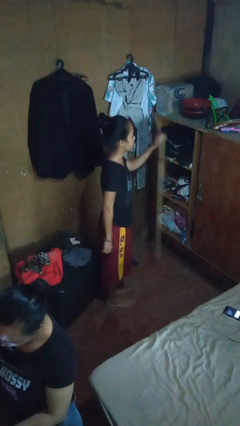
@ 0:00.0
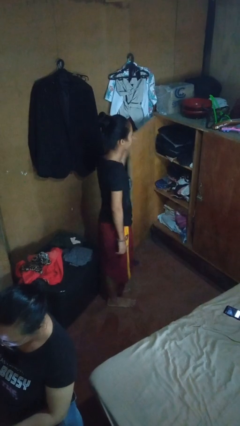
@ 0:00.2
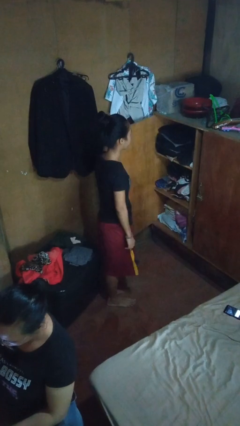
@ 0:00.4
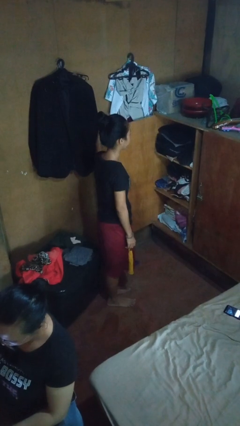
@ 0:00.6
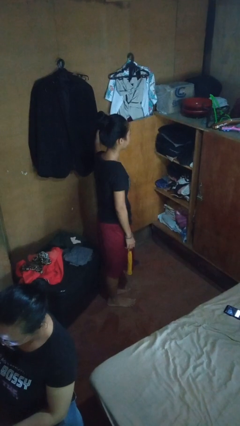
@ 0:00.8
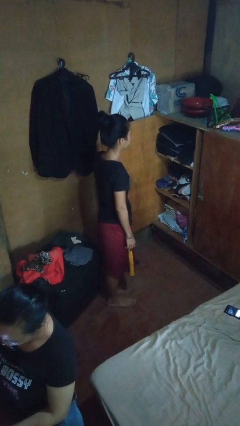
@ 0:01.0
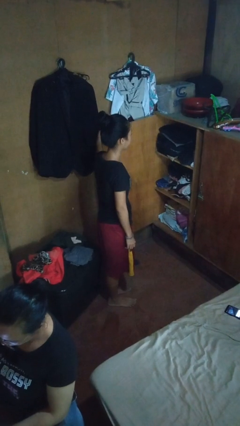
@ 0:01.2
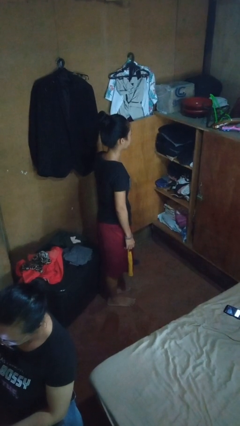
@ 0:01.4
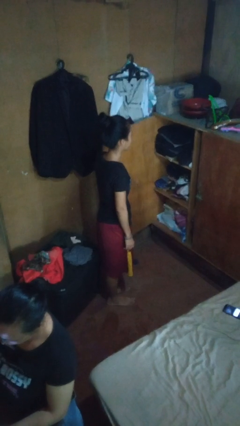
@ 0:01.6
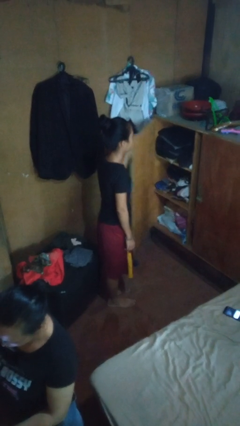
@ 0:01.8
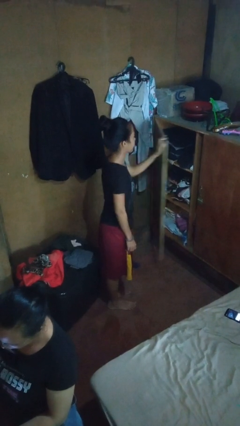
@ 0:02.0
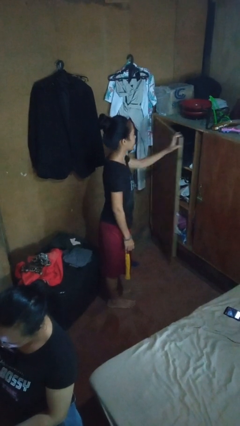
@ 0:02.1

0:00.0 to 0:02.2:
person opens closet door

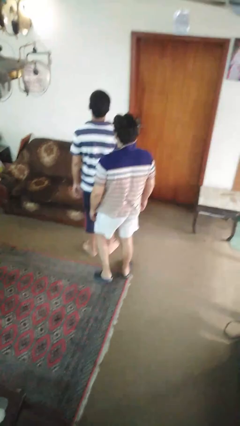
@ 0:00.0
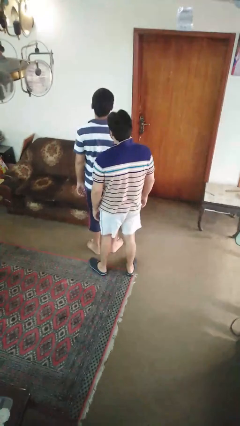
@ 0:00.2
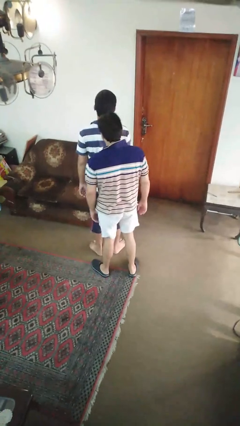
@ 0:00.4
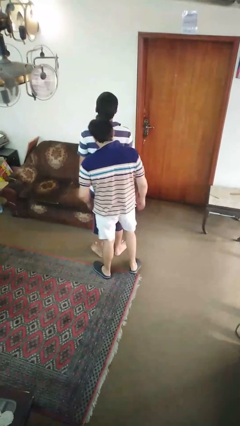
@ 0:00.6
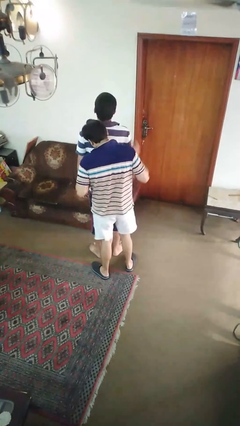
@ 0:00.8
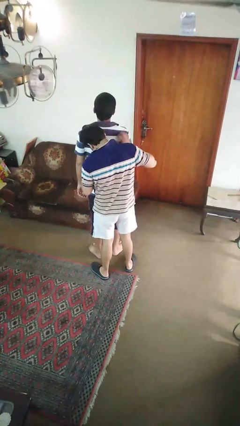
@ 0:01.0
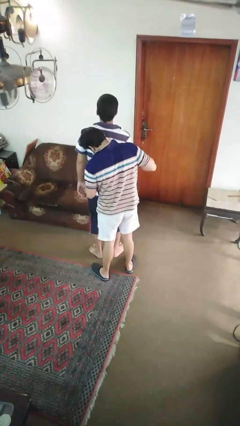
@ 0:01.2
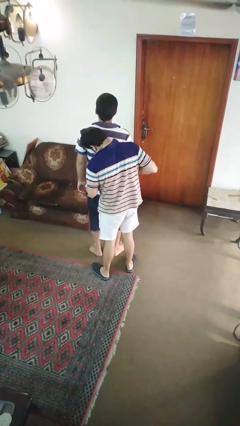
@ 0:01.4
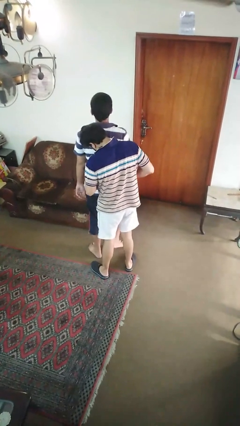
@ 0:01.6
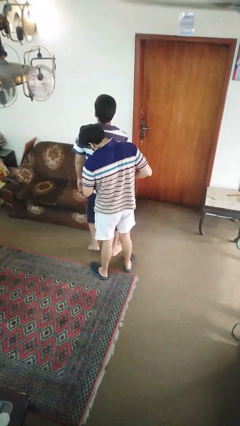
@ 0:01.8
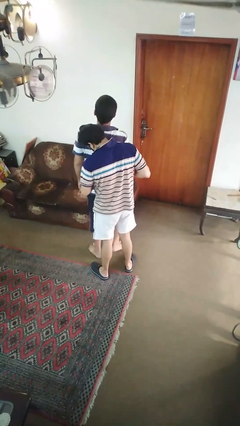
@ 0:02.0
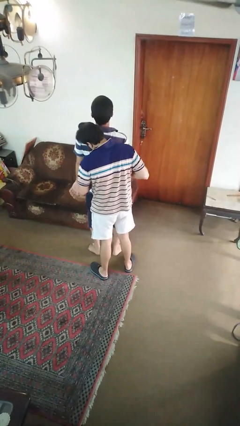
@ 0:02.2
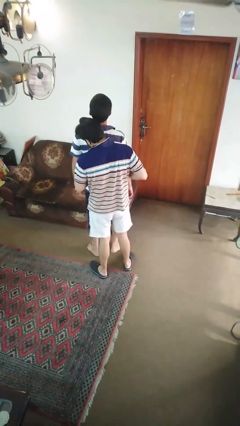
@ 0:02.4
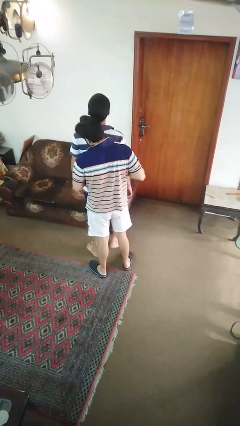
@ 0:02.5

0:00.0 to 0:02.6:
person tickles person

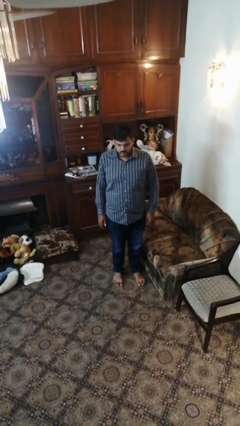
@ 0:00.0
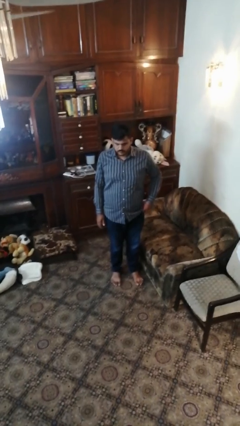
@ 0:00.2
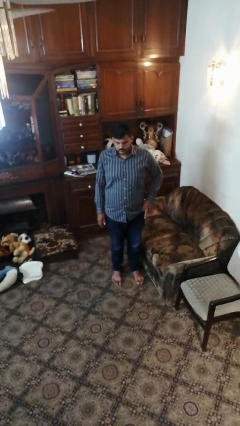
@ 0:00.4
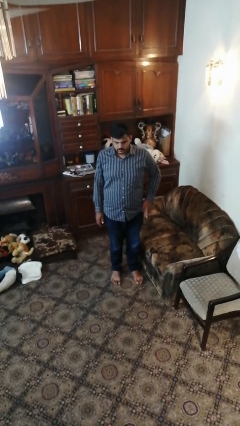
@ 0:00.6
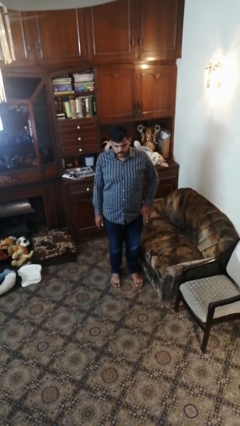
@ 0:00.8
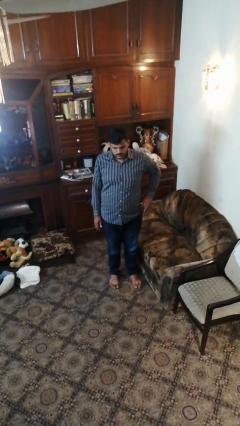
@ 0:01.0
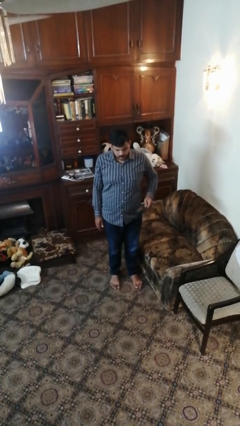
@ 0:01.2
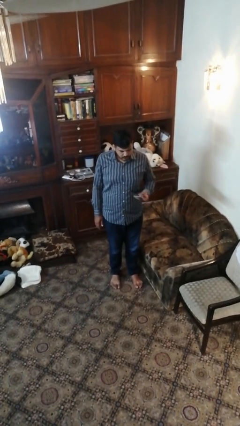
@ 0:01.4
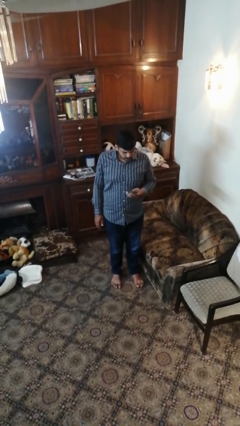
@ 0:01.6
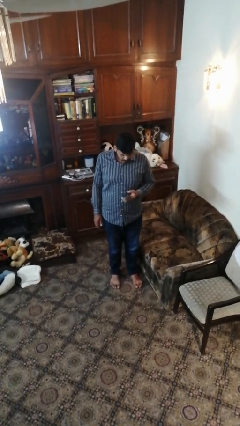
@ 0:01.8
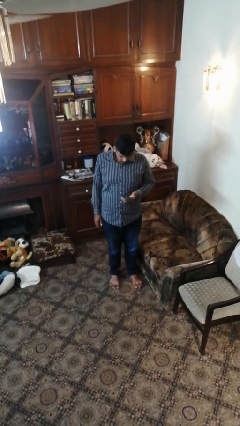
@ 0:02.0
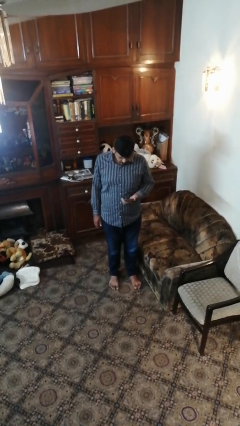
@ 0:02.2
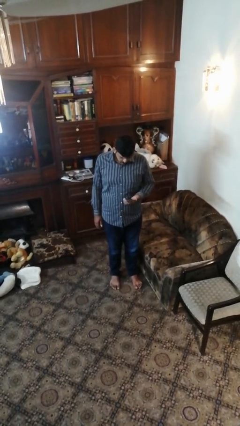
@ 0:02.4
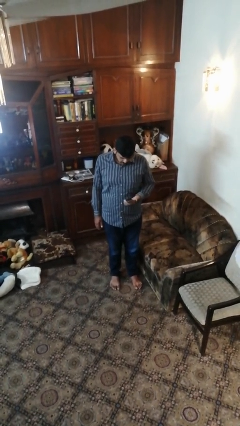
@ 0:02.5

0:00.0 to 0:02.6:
person takes phone from pocket

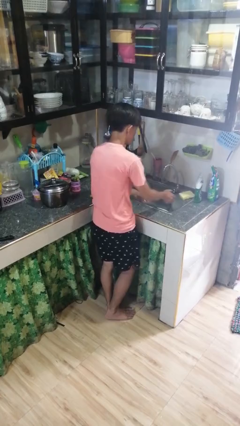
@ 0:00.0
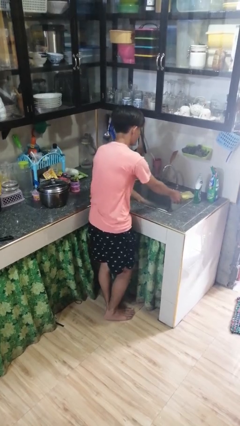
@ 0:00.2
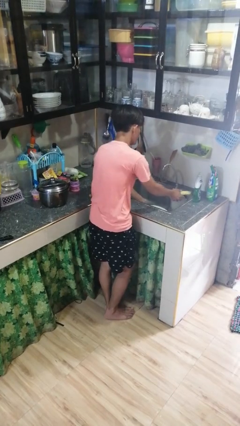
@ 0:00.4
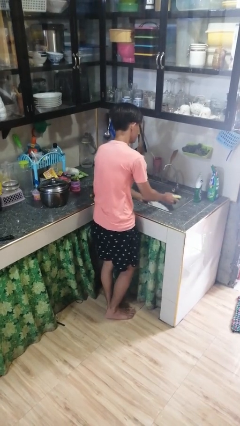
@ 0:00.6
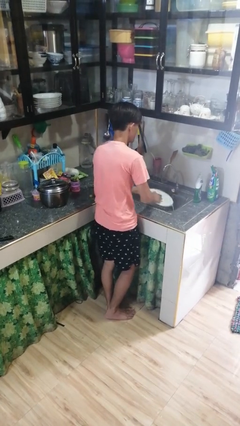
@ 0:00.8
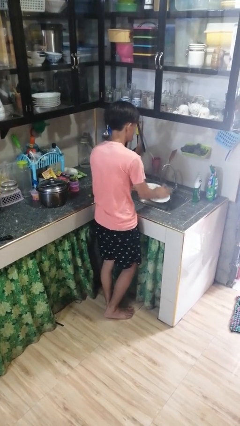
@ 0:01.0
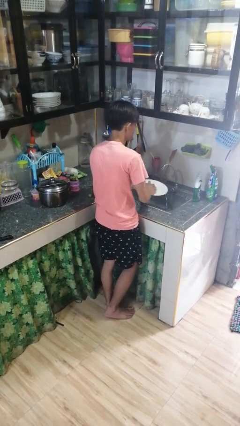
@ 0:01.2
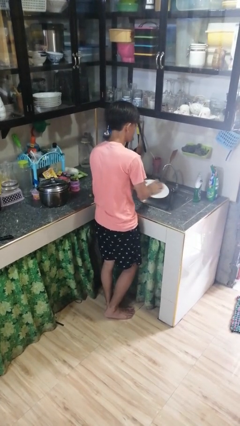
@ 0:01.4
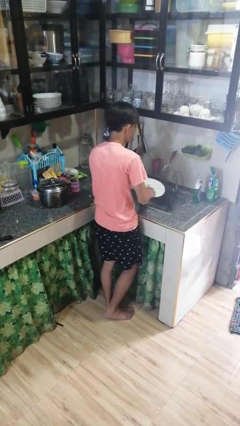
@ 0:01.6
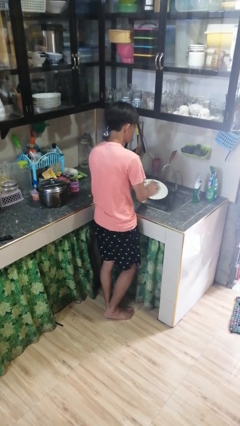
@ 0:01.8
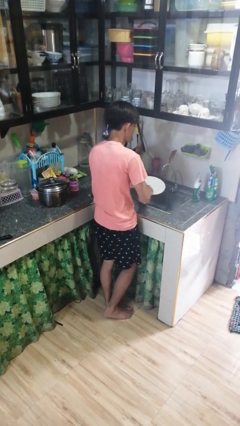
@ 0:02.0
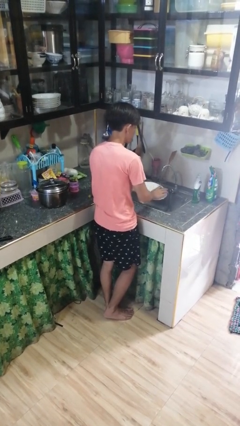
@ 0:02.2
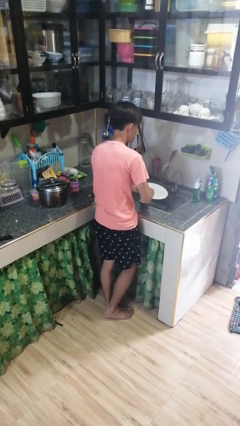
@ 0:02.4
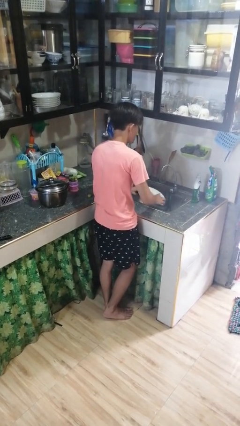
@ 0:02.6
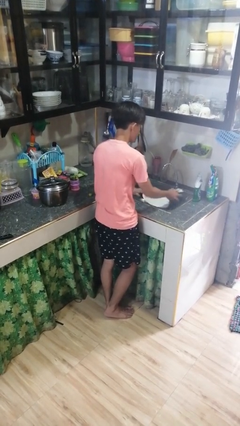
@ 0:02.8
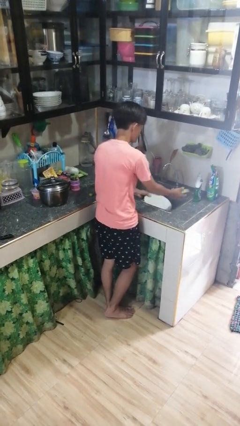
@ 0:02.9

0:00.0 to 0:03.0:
person washes dish

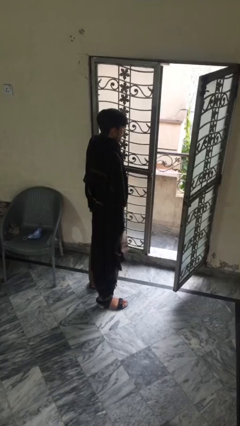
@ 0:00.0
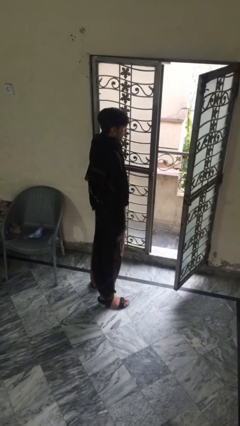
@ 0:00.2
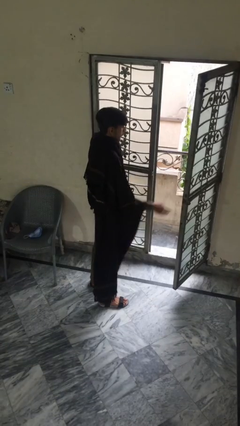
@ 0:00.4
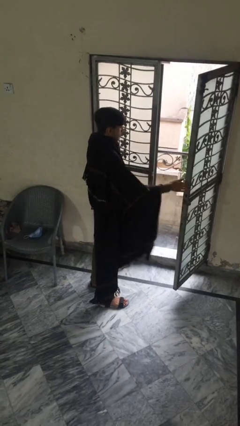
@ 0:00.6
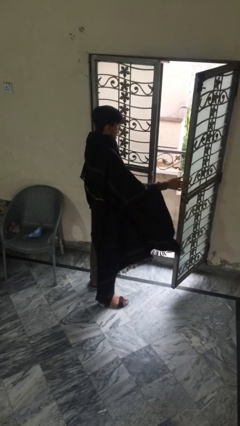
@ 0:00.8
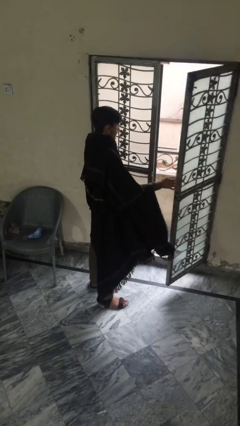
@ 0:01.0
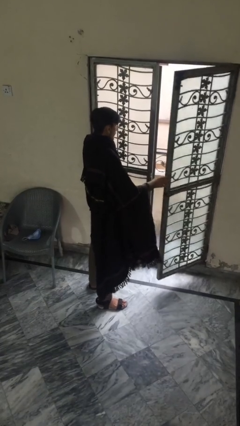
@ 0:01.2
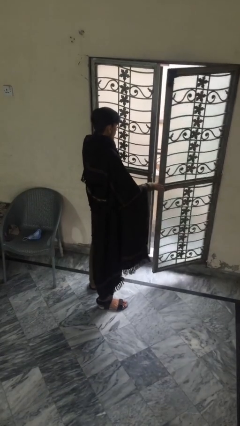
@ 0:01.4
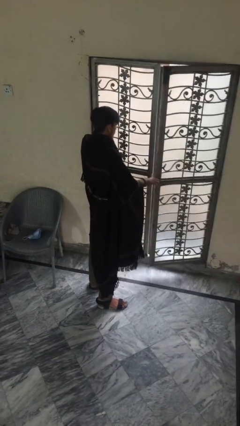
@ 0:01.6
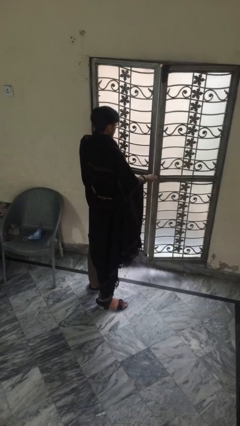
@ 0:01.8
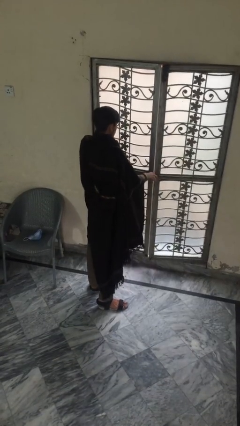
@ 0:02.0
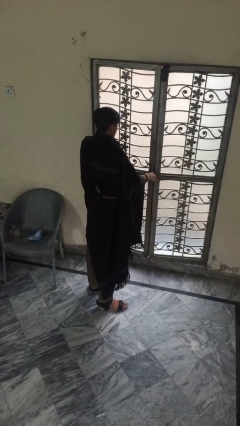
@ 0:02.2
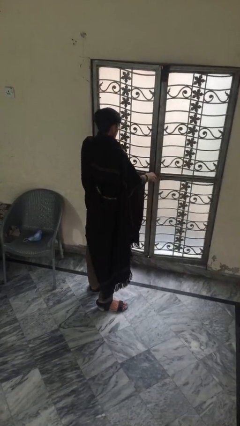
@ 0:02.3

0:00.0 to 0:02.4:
person closes facility door

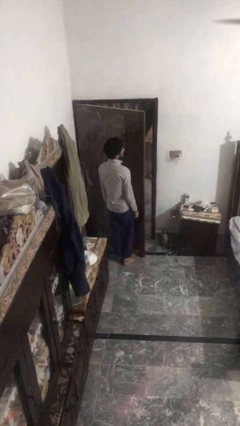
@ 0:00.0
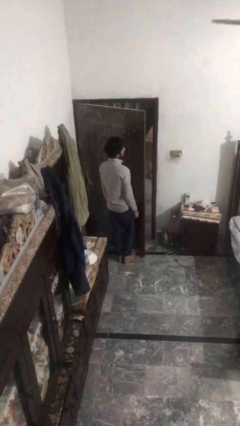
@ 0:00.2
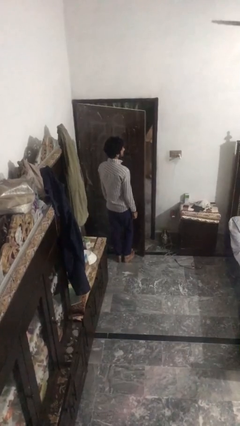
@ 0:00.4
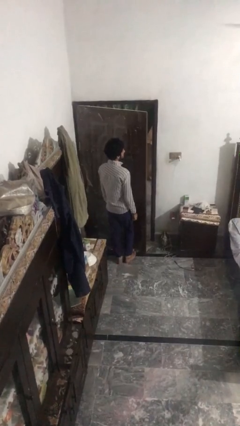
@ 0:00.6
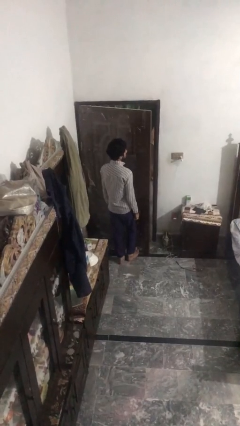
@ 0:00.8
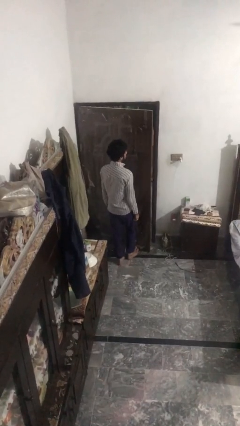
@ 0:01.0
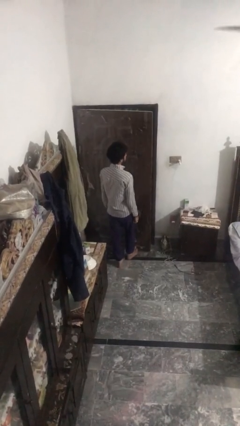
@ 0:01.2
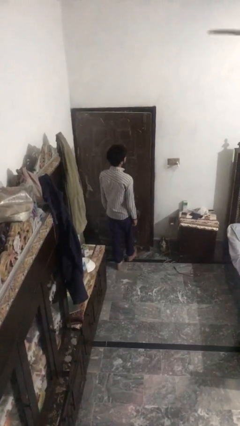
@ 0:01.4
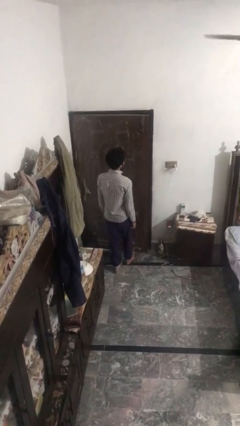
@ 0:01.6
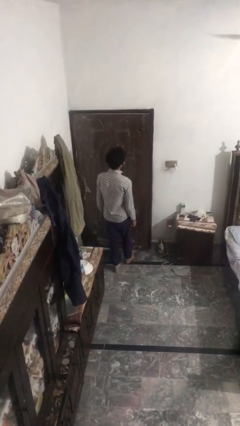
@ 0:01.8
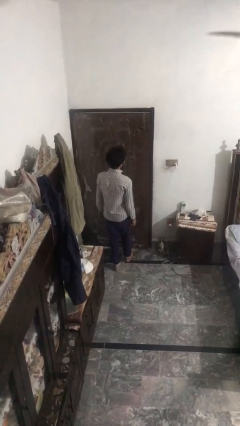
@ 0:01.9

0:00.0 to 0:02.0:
person closes door with foot

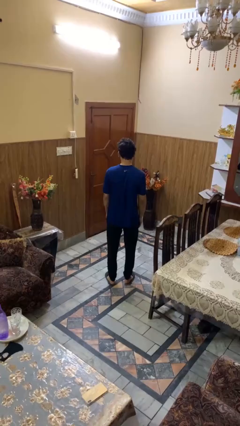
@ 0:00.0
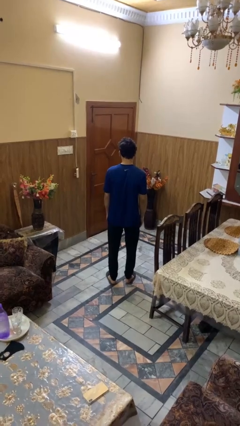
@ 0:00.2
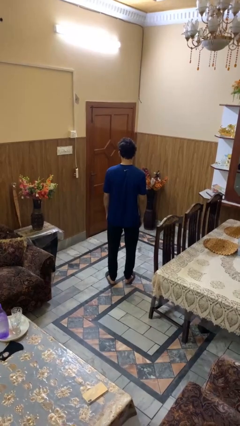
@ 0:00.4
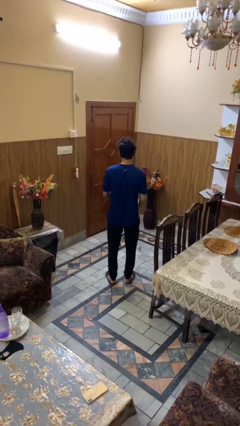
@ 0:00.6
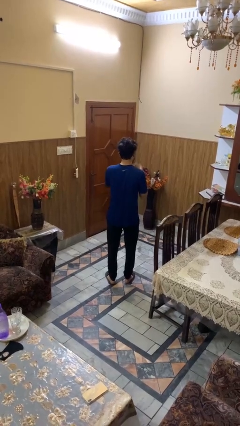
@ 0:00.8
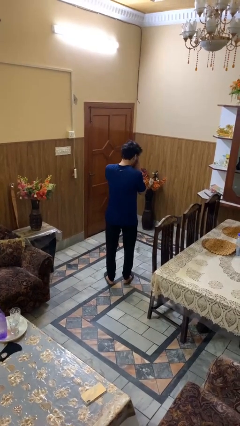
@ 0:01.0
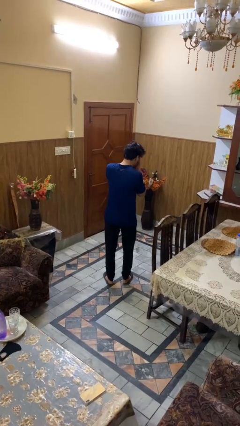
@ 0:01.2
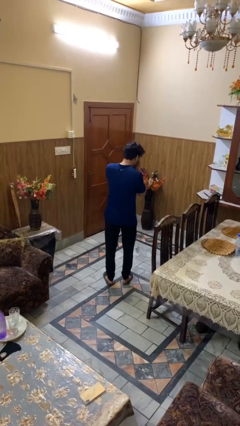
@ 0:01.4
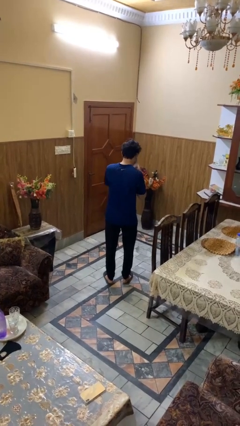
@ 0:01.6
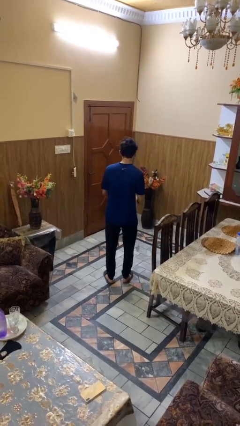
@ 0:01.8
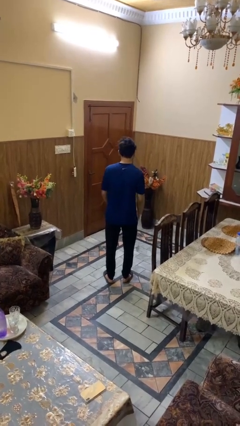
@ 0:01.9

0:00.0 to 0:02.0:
person sneezes into hand
